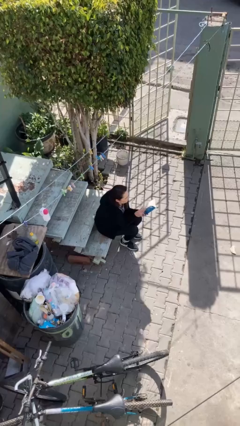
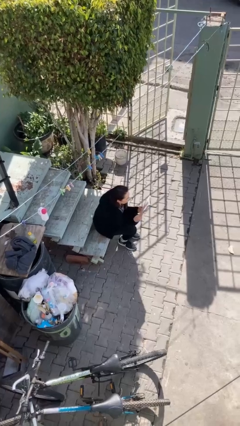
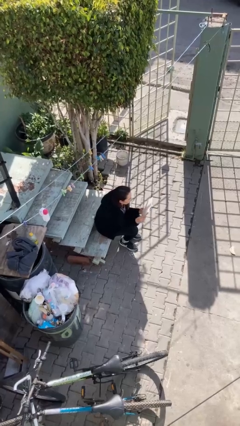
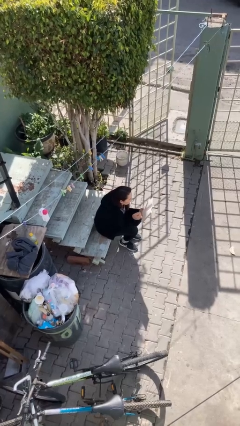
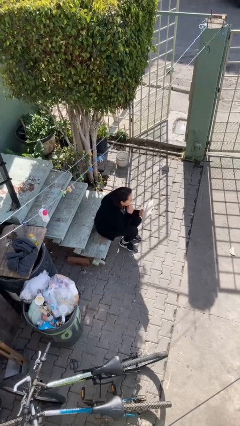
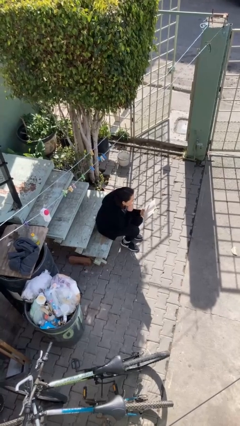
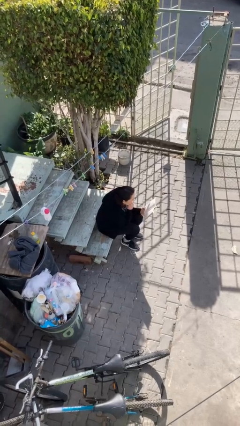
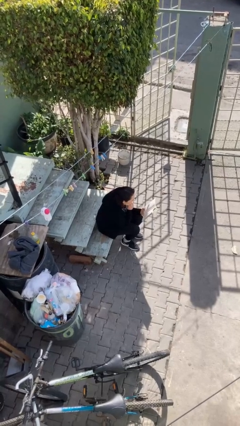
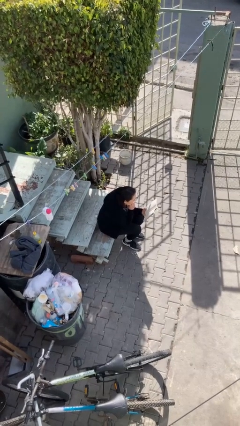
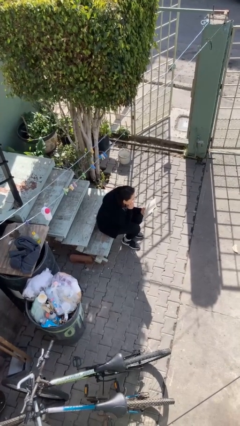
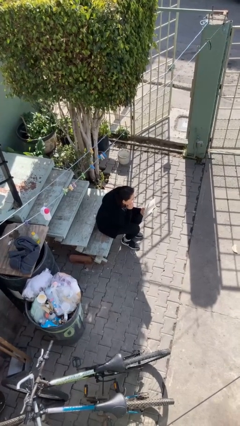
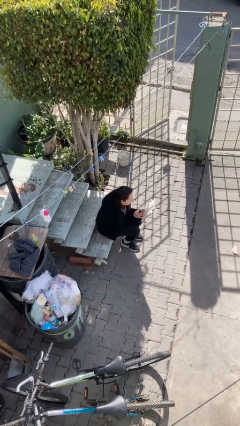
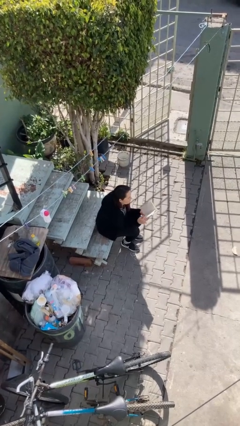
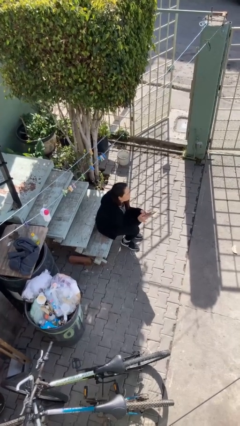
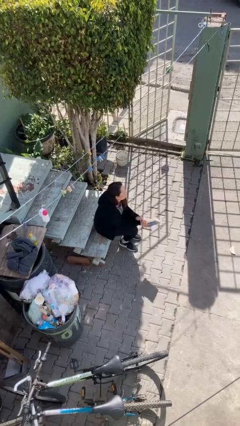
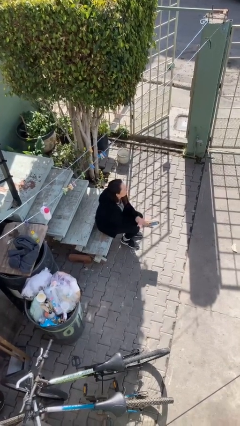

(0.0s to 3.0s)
person reads document

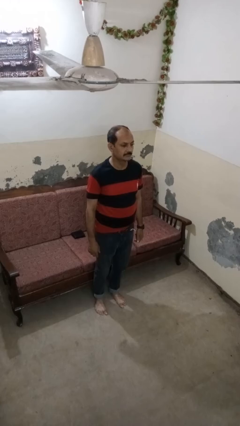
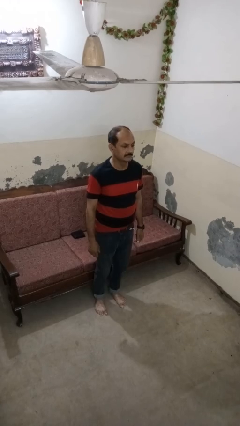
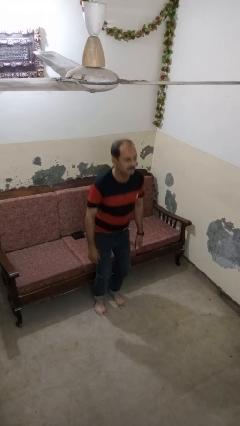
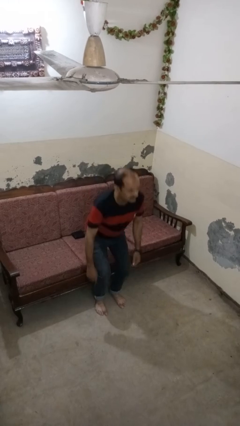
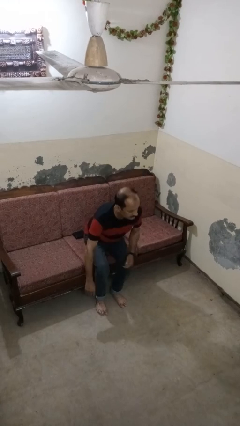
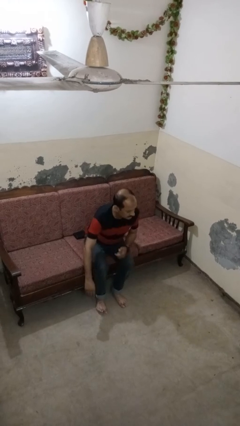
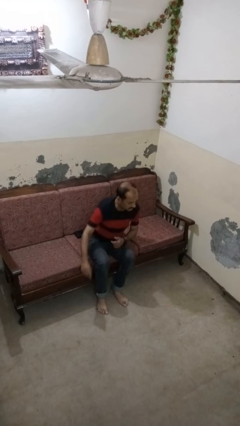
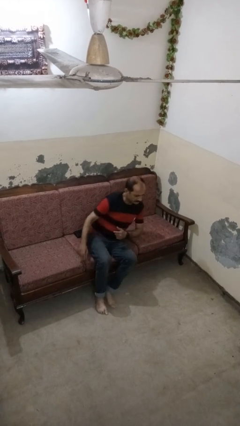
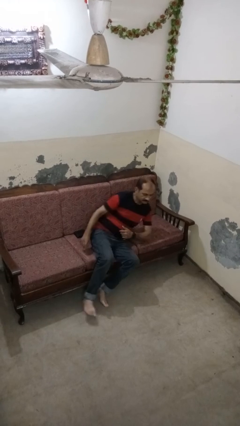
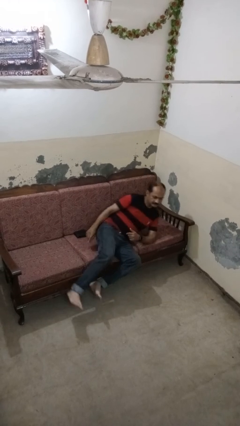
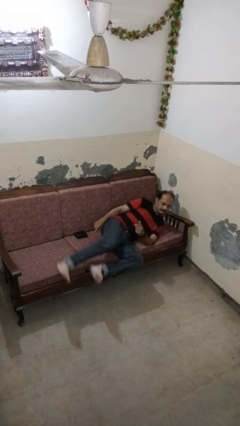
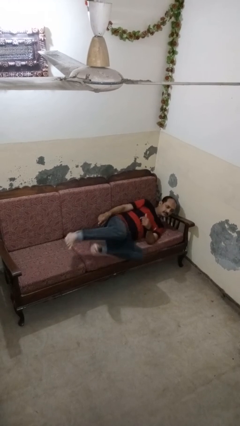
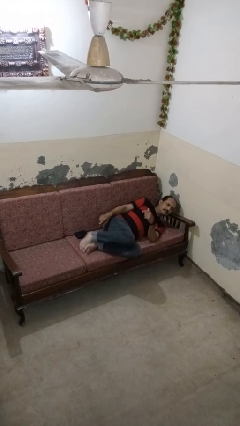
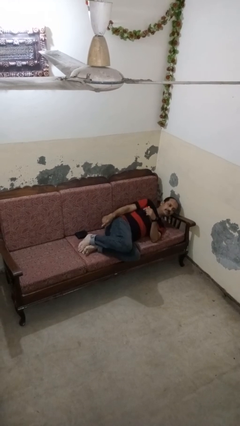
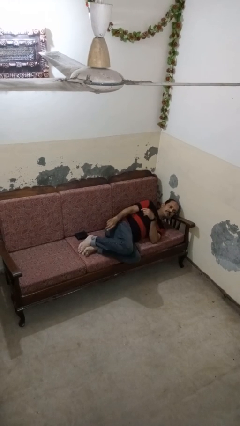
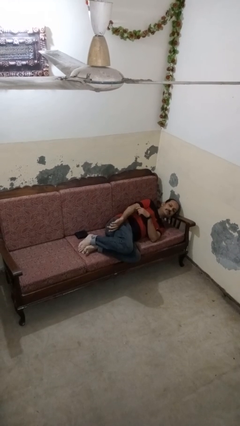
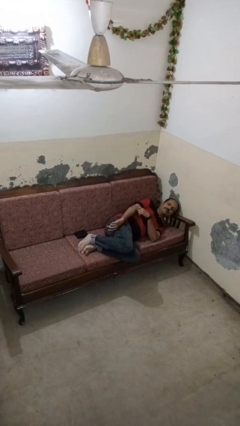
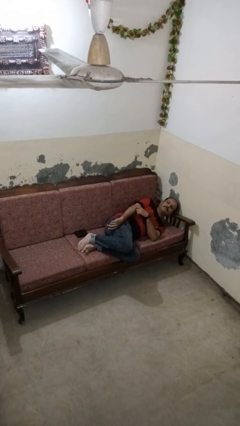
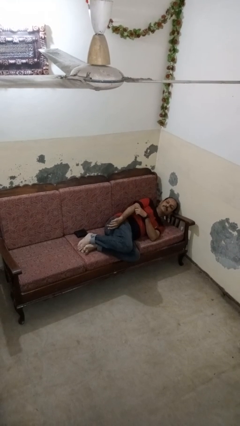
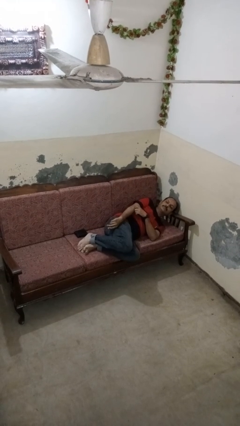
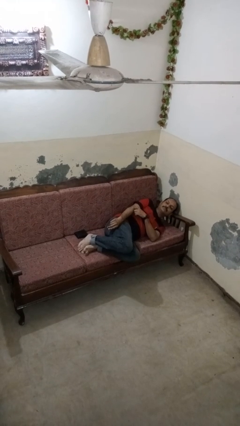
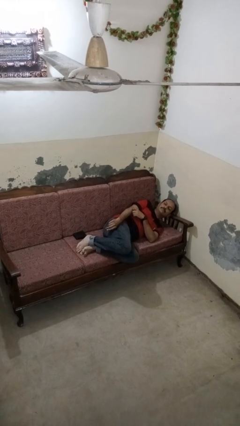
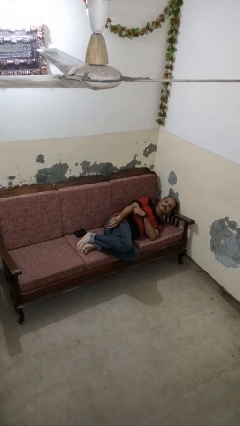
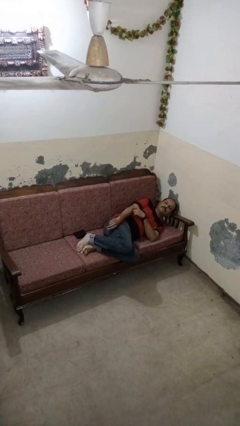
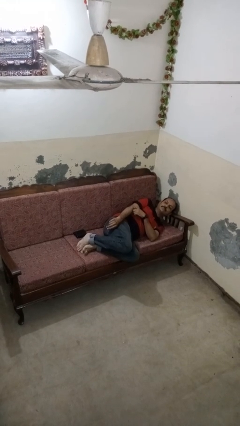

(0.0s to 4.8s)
person lies down on couch

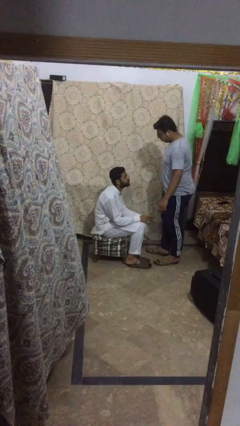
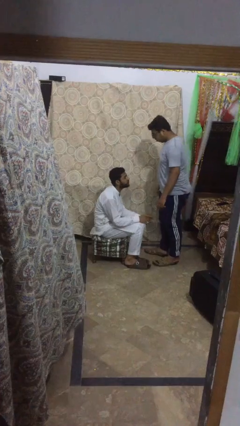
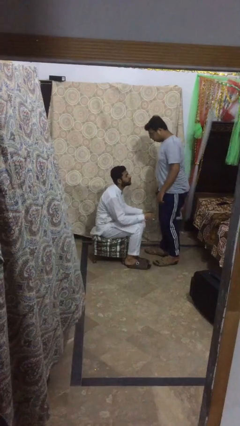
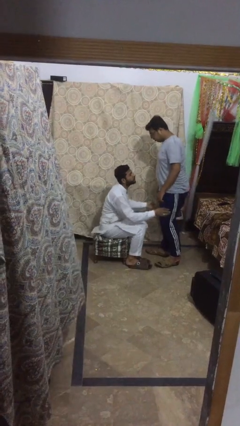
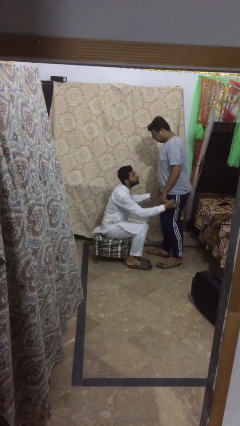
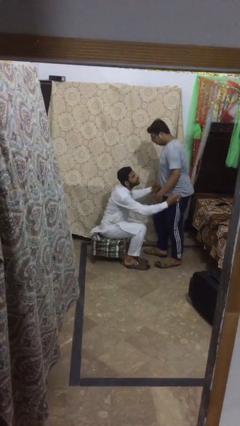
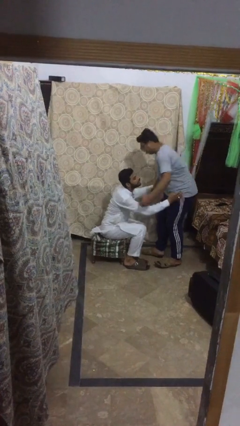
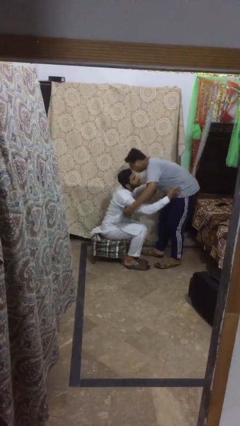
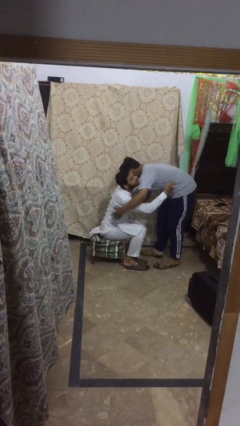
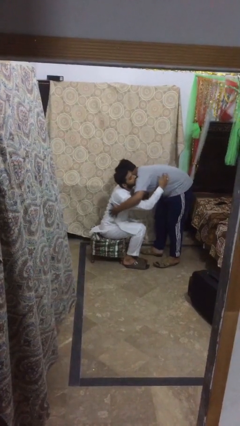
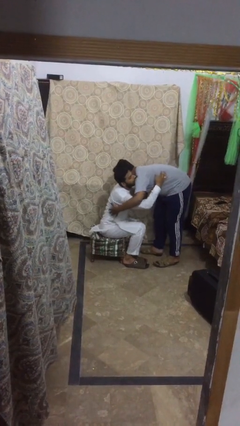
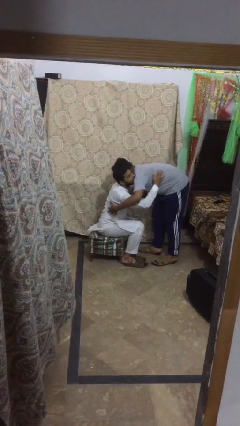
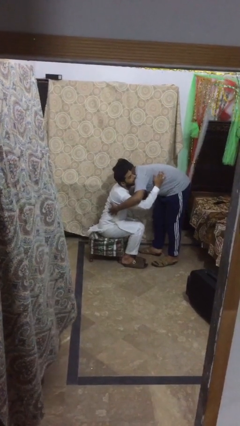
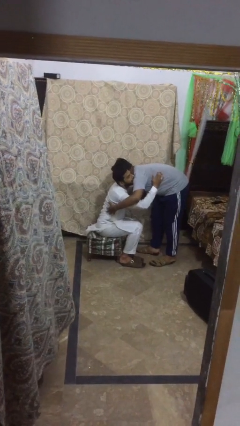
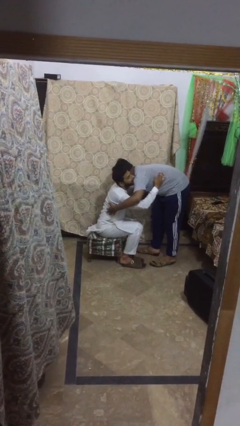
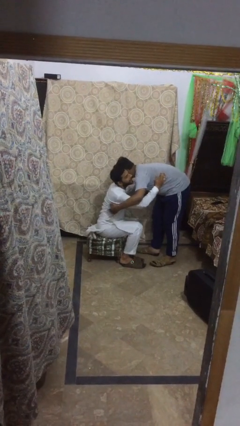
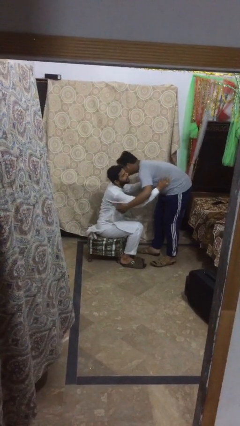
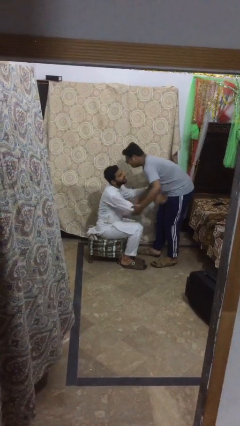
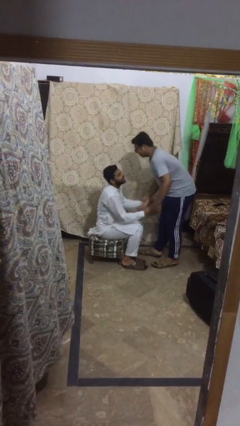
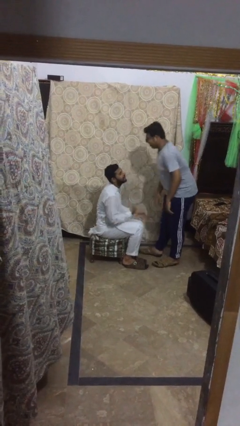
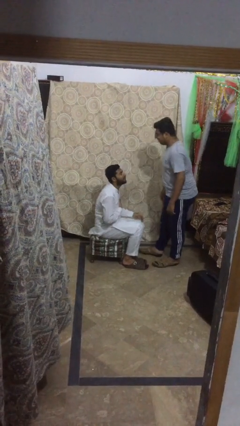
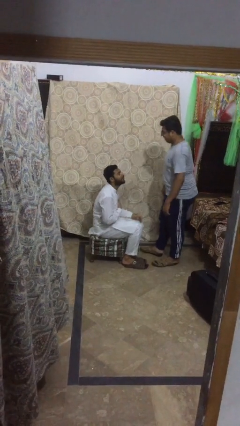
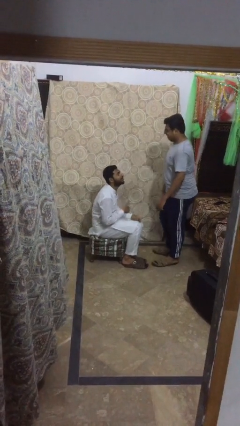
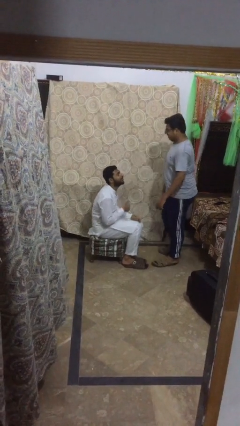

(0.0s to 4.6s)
person embraces person

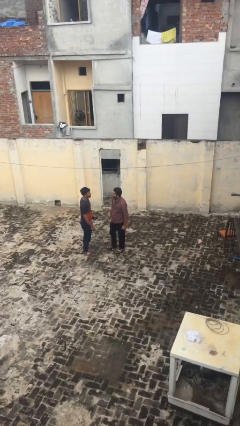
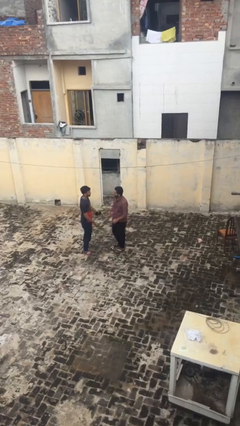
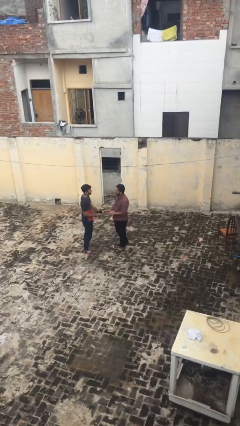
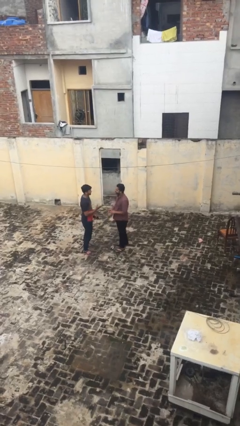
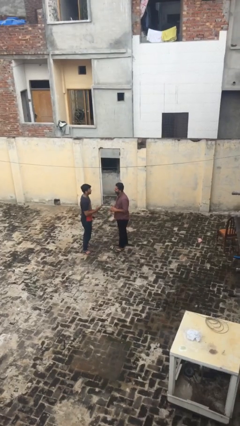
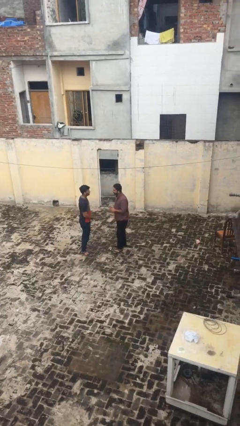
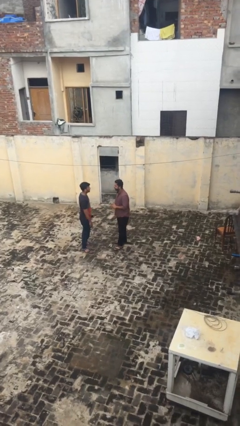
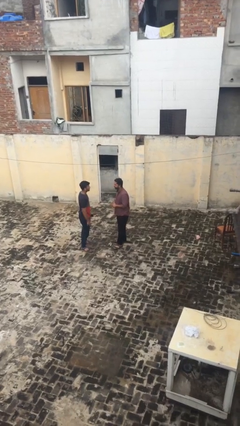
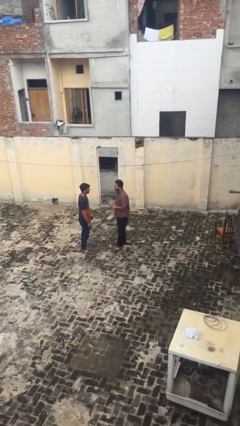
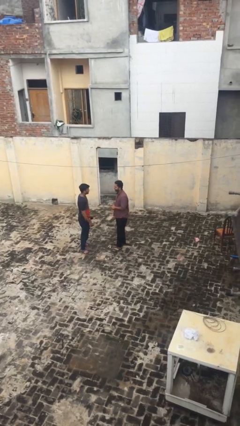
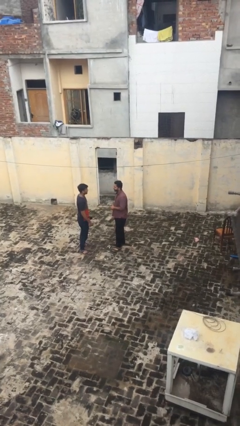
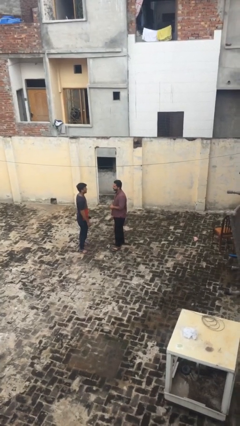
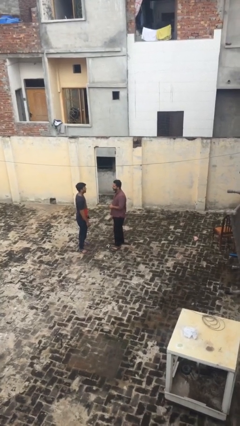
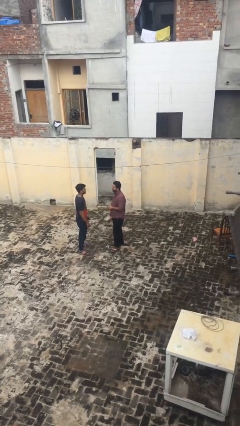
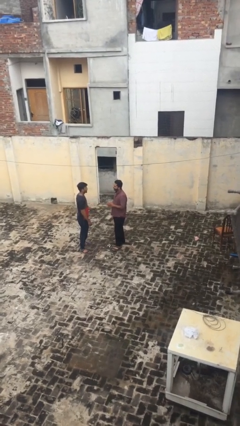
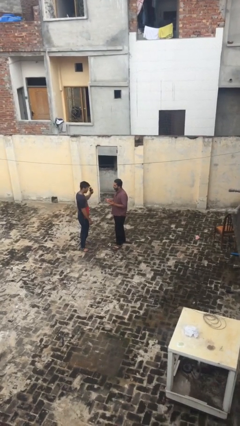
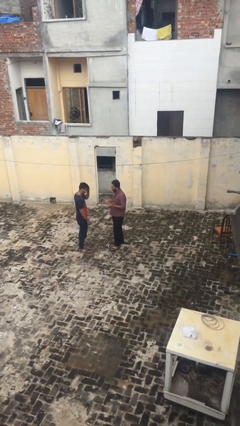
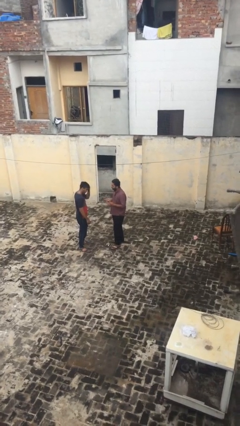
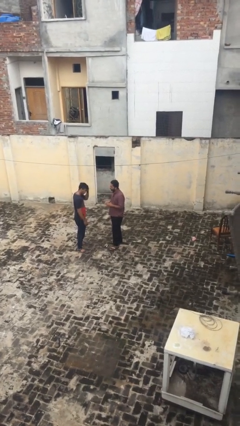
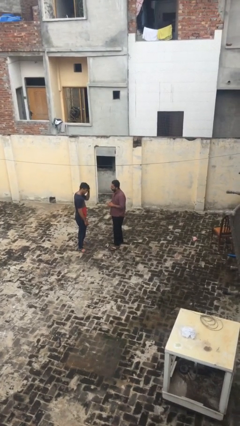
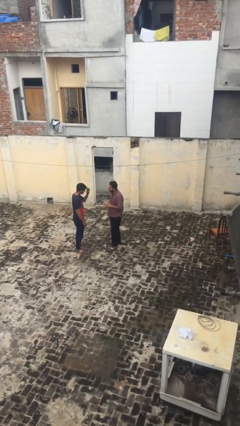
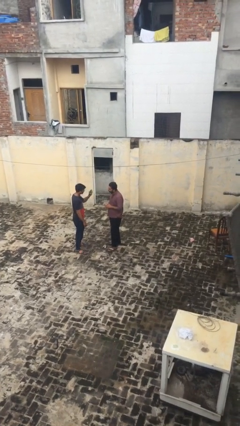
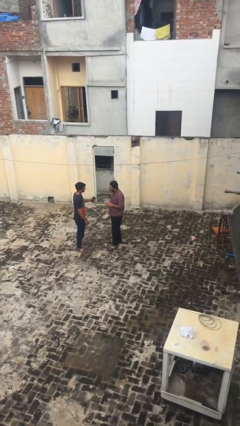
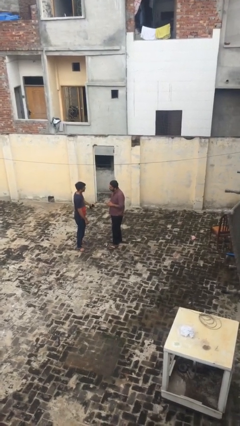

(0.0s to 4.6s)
person talks to person

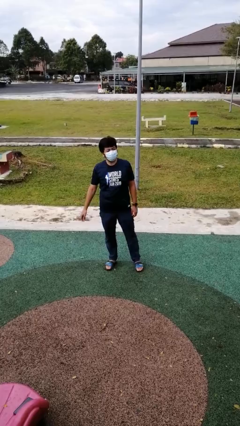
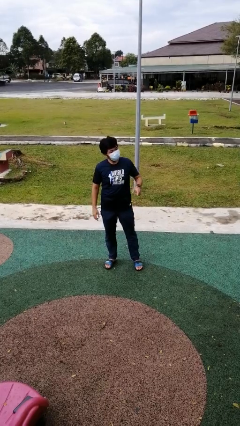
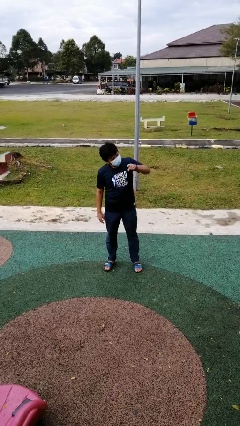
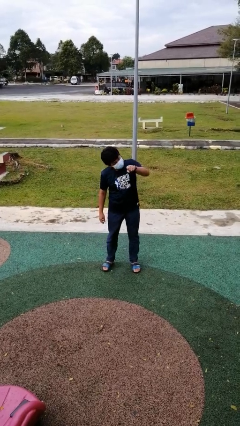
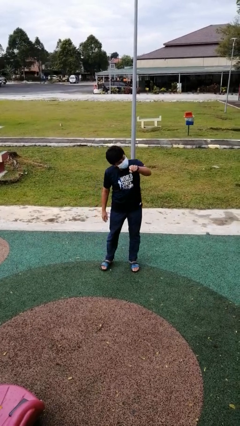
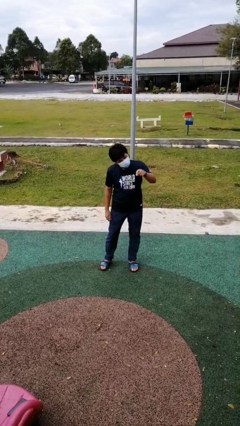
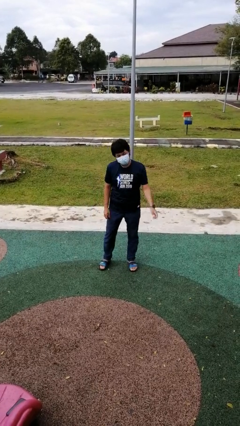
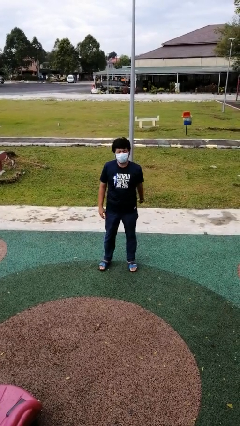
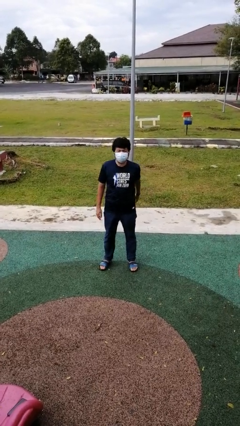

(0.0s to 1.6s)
person points at person
